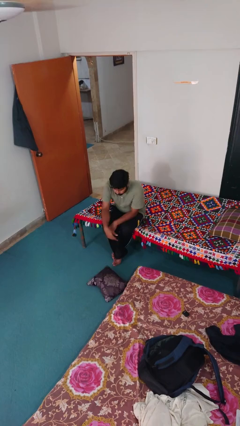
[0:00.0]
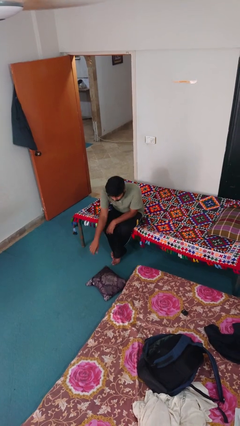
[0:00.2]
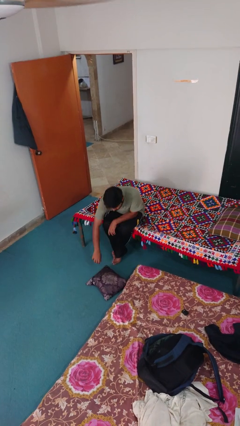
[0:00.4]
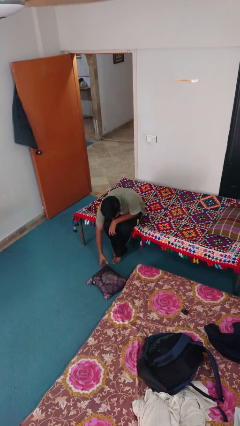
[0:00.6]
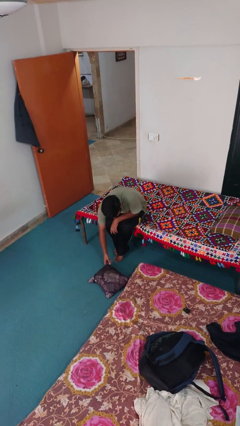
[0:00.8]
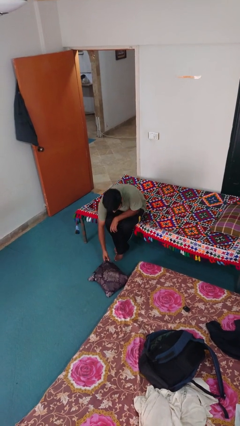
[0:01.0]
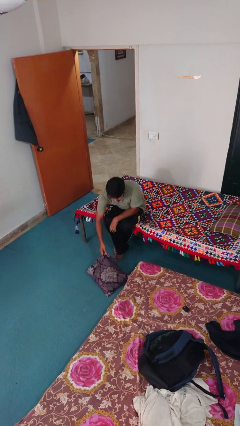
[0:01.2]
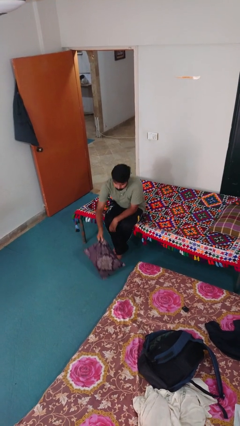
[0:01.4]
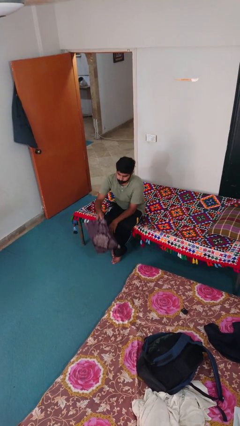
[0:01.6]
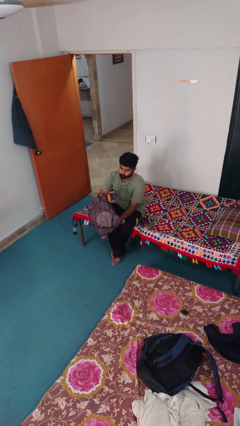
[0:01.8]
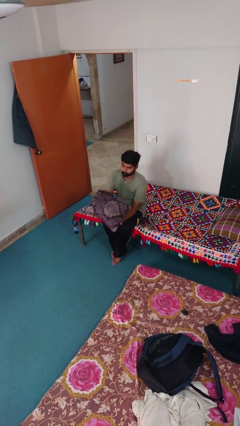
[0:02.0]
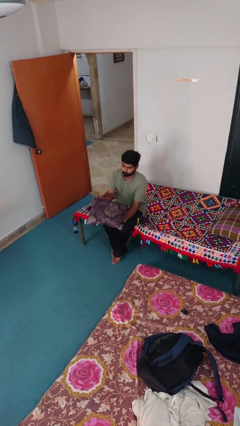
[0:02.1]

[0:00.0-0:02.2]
person picks up object from floor

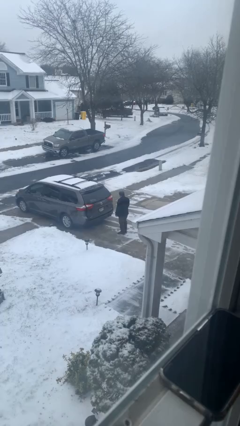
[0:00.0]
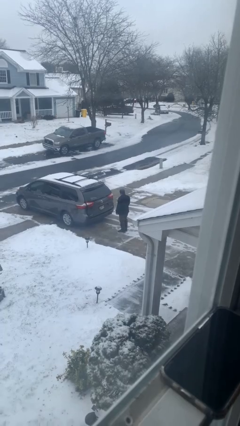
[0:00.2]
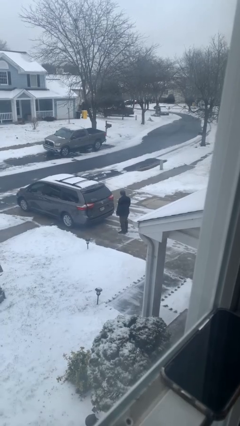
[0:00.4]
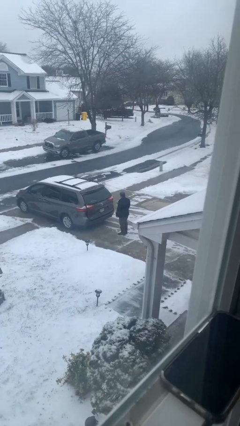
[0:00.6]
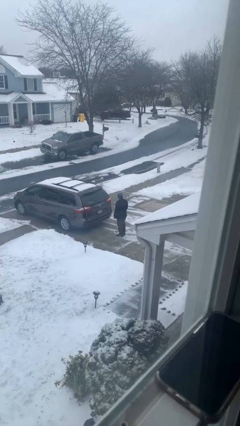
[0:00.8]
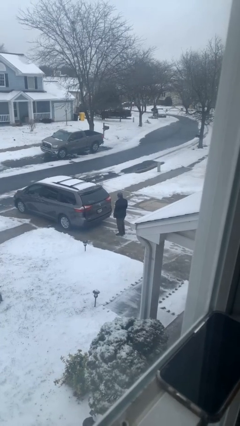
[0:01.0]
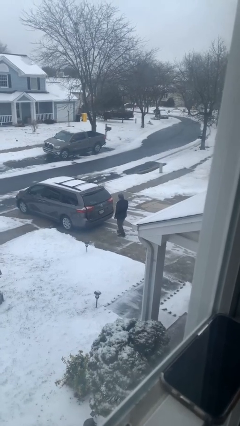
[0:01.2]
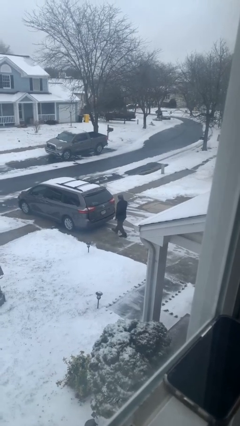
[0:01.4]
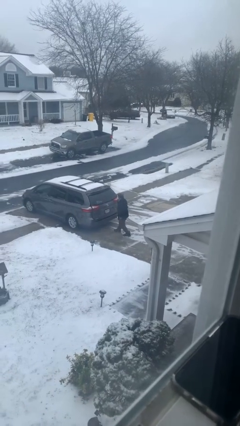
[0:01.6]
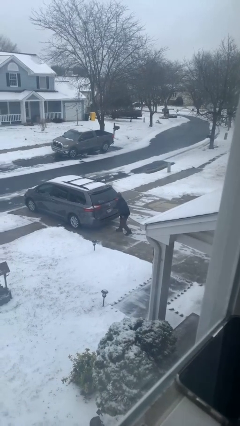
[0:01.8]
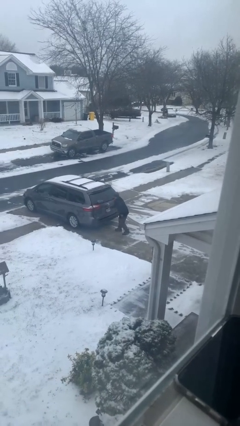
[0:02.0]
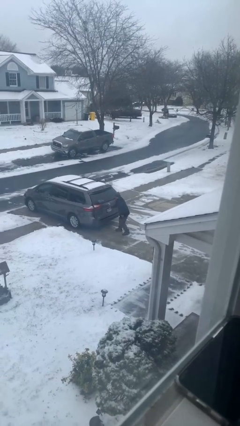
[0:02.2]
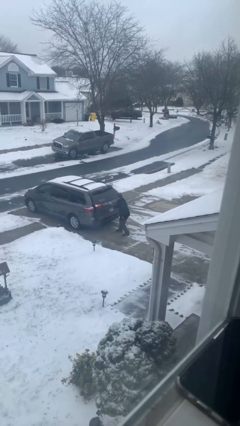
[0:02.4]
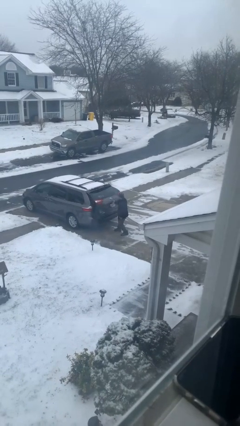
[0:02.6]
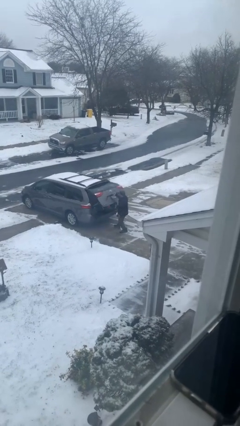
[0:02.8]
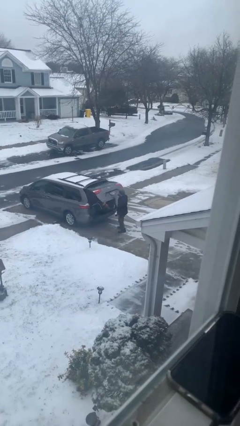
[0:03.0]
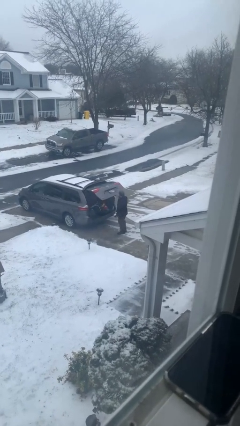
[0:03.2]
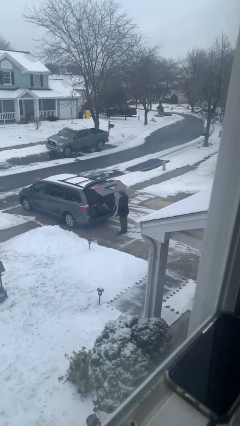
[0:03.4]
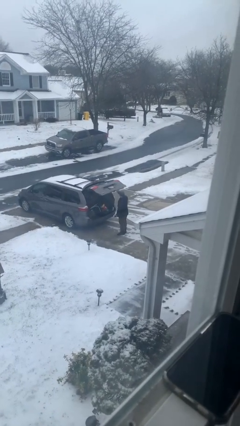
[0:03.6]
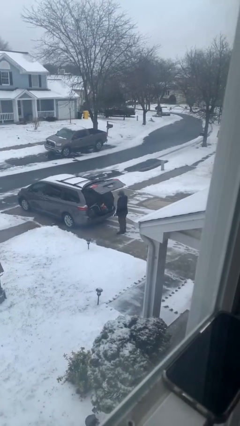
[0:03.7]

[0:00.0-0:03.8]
person opens car trunk

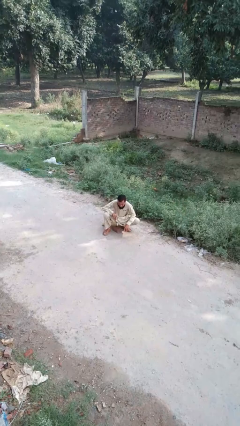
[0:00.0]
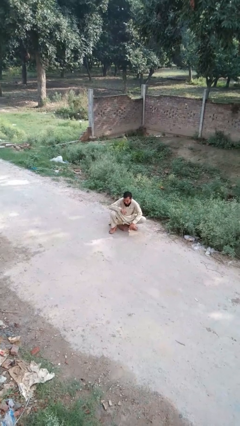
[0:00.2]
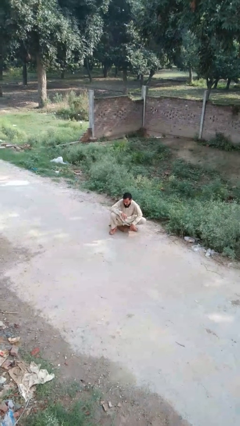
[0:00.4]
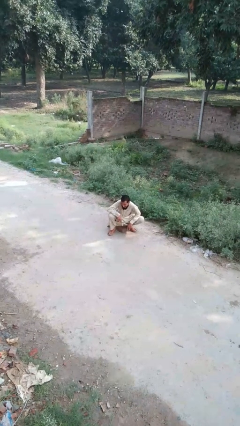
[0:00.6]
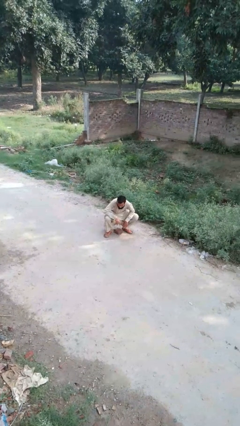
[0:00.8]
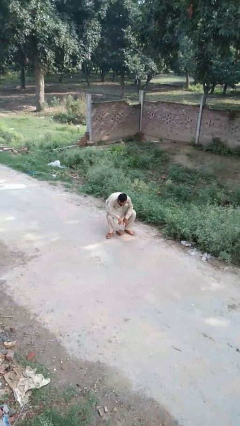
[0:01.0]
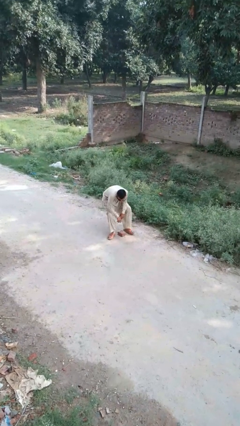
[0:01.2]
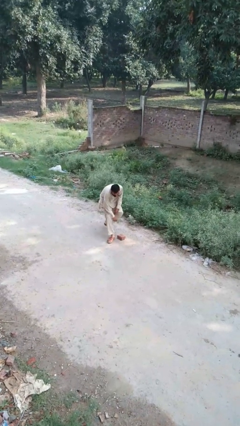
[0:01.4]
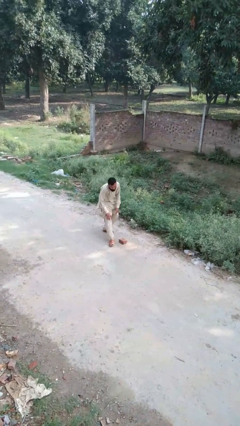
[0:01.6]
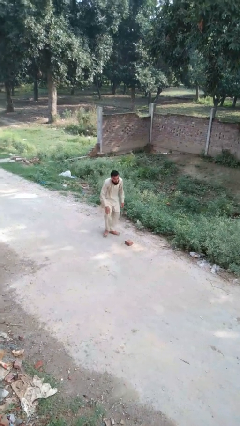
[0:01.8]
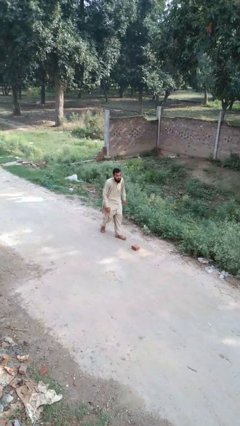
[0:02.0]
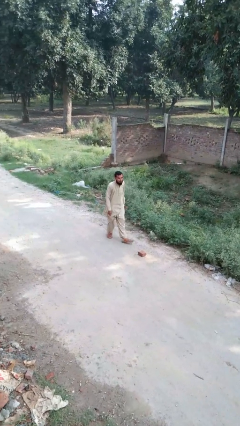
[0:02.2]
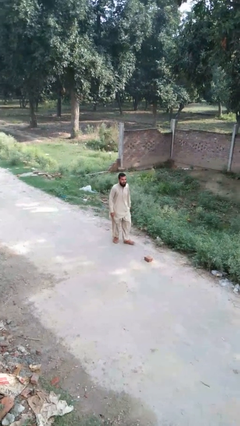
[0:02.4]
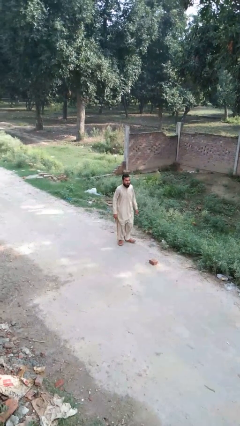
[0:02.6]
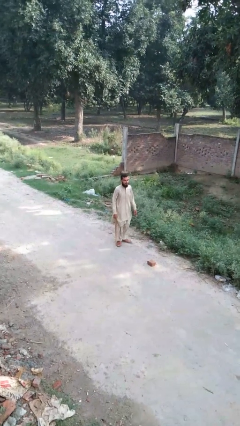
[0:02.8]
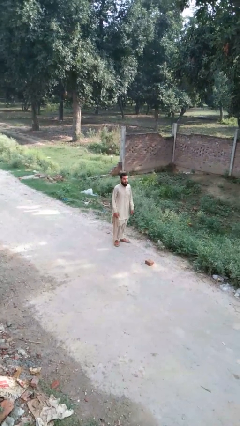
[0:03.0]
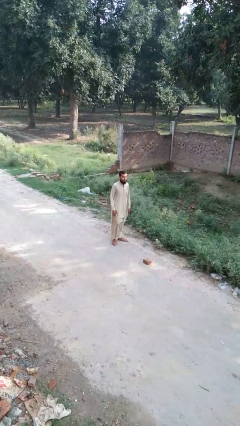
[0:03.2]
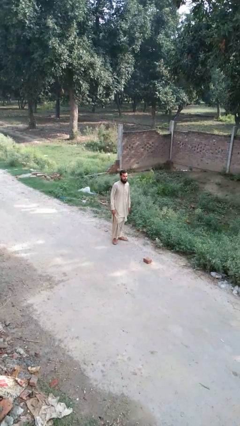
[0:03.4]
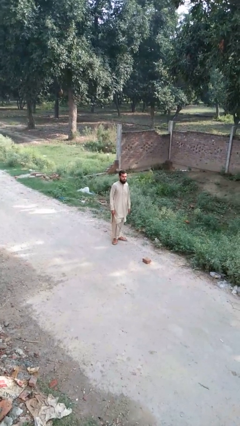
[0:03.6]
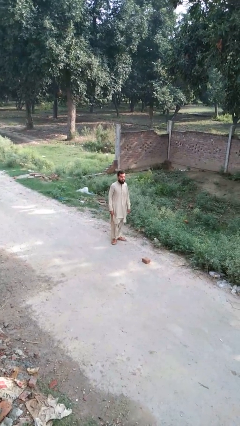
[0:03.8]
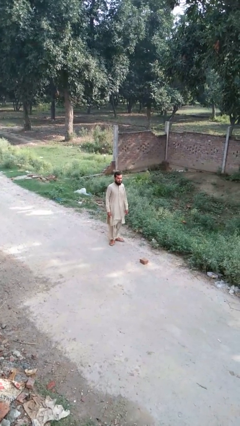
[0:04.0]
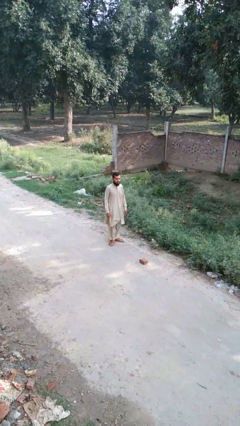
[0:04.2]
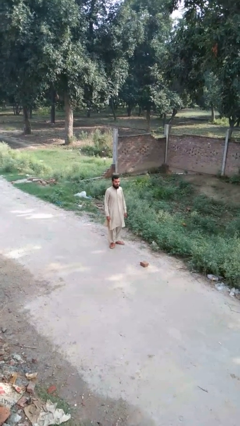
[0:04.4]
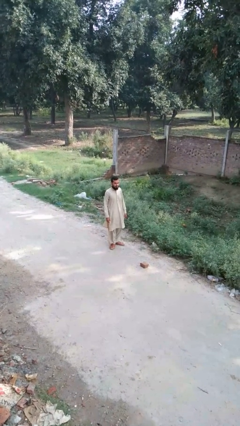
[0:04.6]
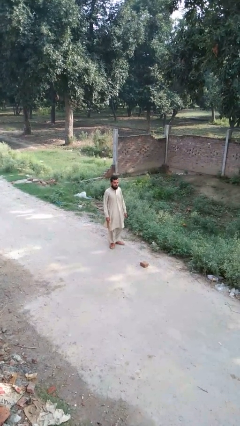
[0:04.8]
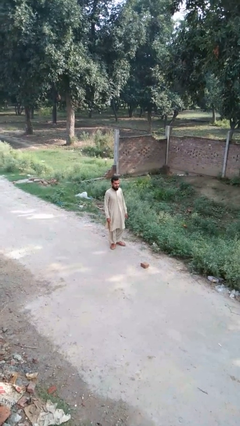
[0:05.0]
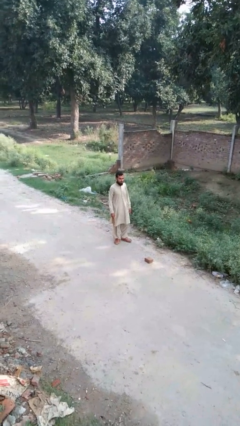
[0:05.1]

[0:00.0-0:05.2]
person stands up from floor

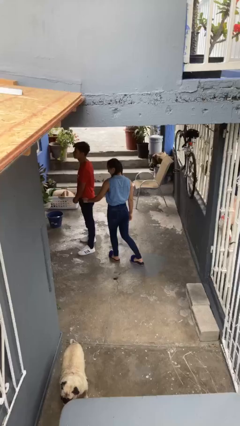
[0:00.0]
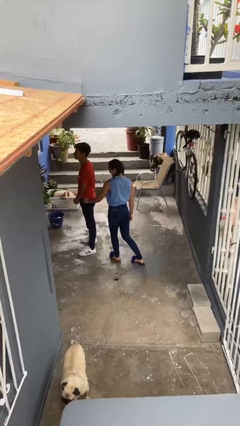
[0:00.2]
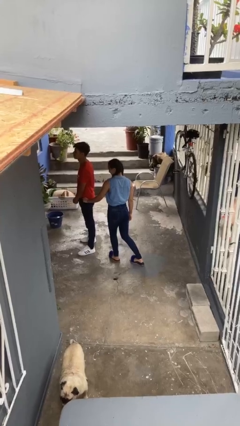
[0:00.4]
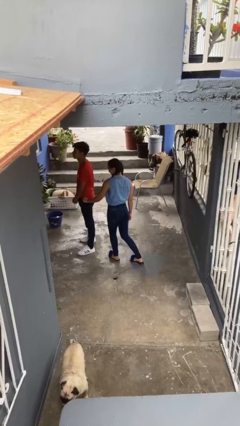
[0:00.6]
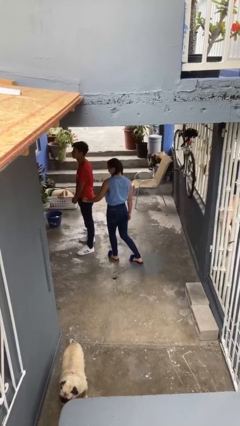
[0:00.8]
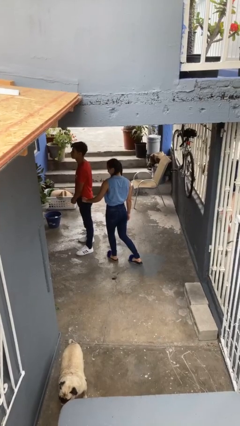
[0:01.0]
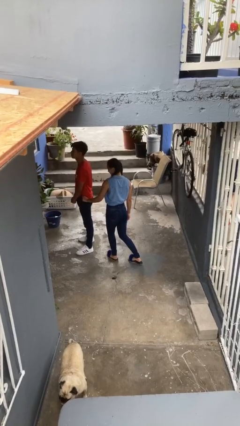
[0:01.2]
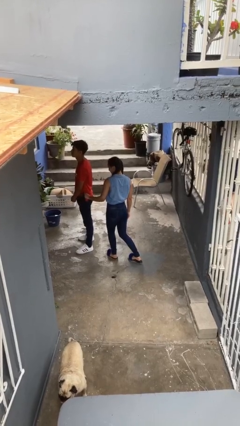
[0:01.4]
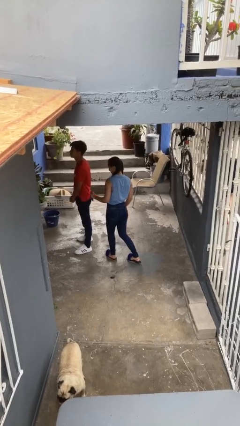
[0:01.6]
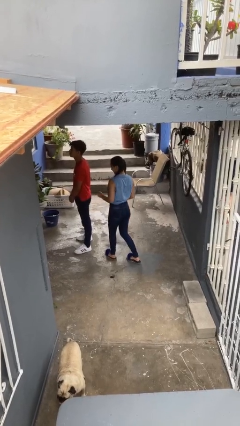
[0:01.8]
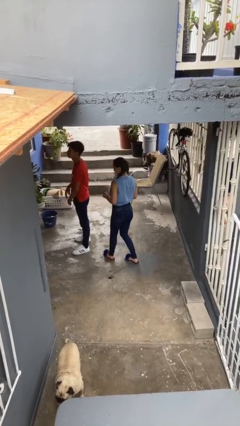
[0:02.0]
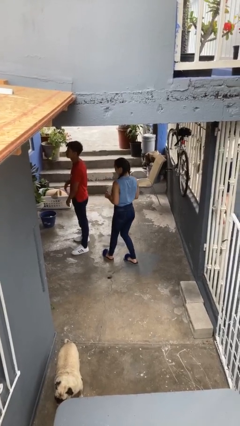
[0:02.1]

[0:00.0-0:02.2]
person steals object from person

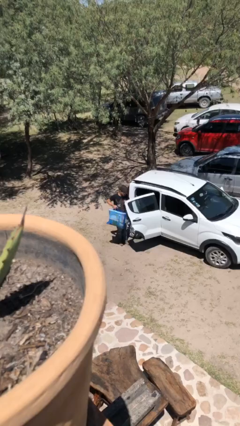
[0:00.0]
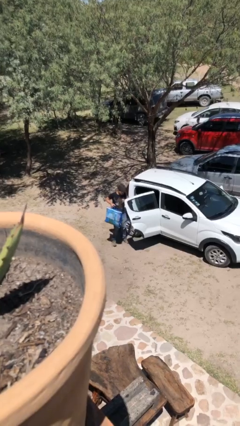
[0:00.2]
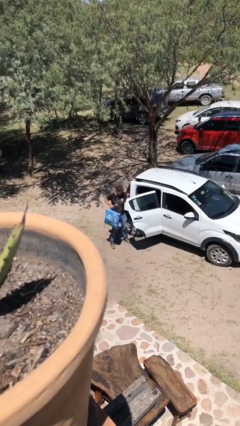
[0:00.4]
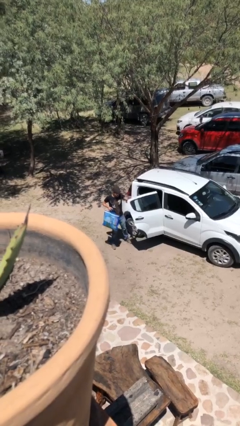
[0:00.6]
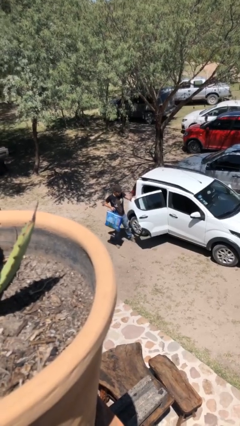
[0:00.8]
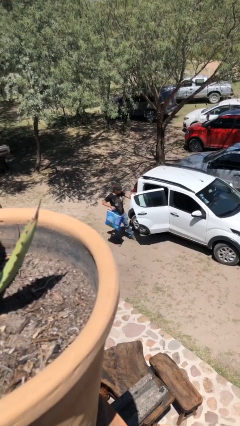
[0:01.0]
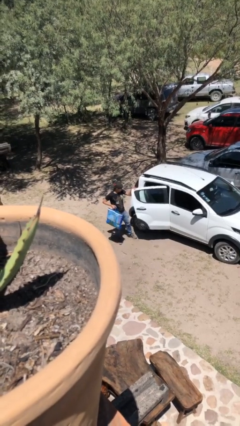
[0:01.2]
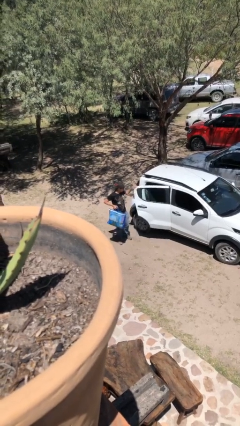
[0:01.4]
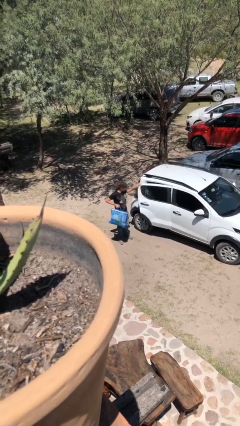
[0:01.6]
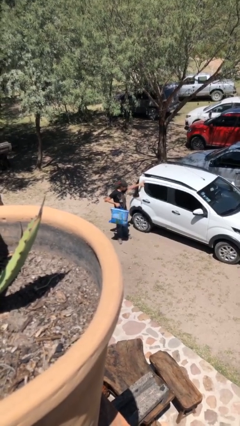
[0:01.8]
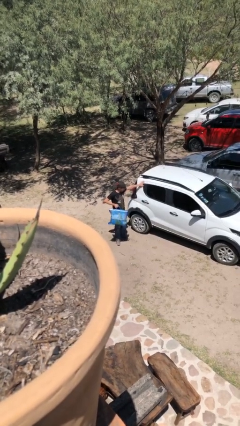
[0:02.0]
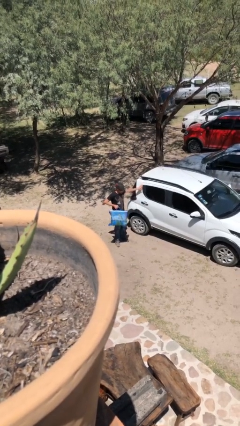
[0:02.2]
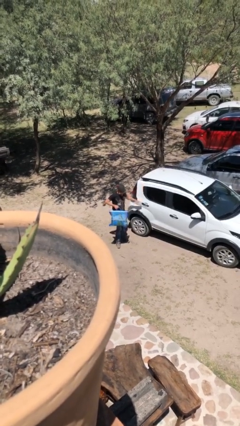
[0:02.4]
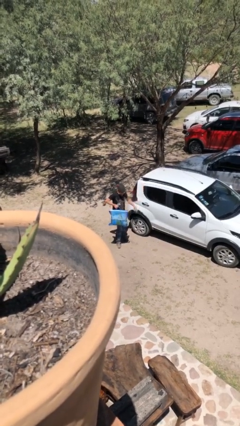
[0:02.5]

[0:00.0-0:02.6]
person closes car door

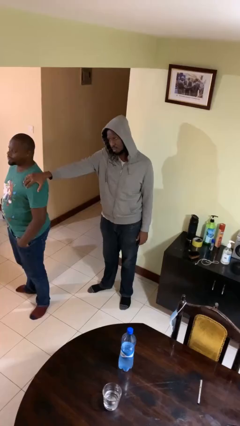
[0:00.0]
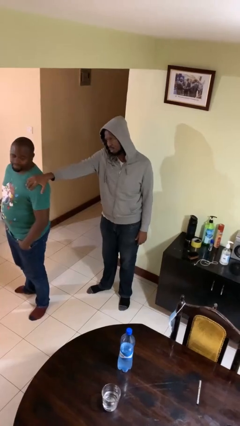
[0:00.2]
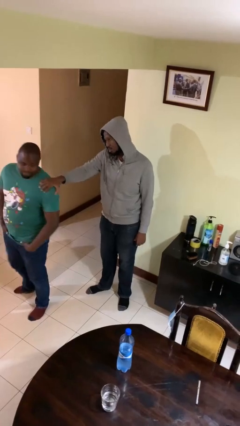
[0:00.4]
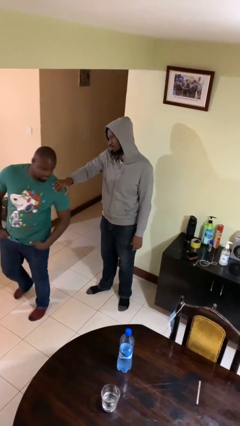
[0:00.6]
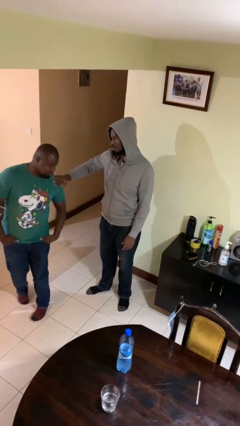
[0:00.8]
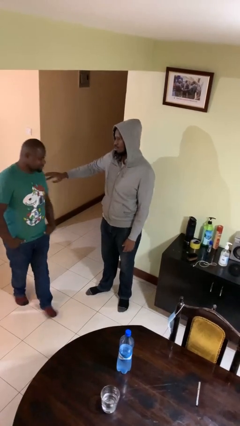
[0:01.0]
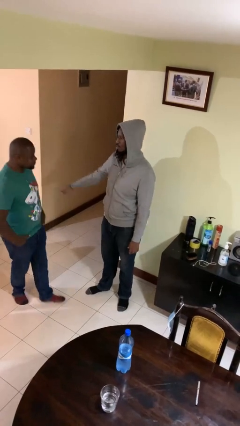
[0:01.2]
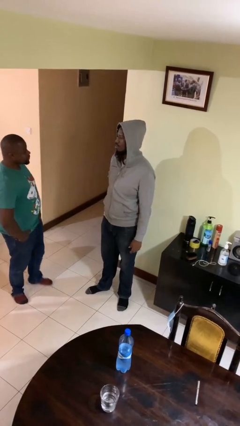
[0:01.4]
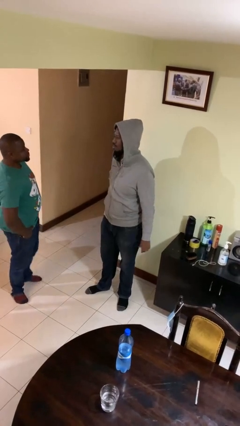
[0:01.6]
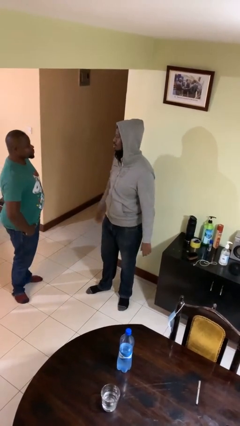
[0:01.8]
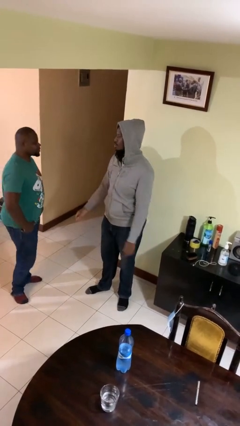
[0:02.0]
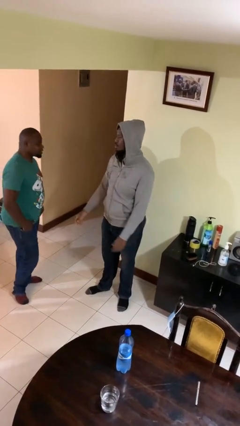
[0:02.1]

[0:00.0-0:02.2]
person spins person around
